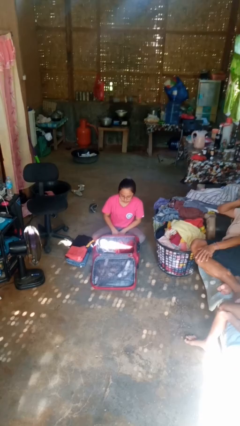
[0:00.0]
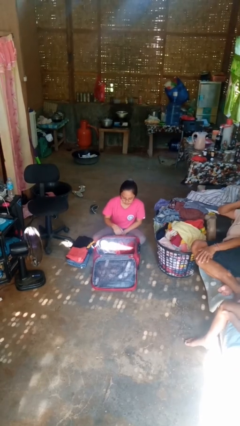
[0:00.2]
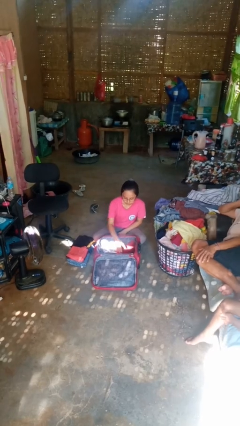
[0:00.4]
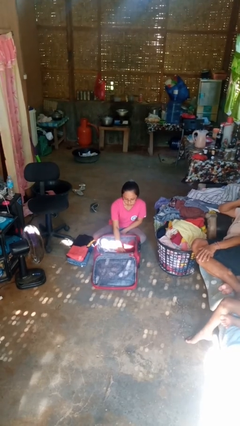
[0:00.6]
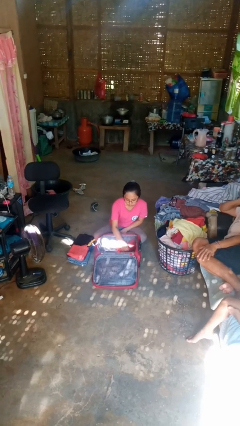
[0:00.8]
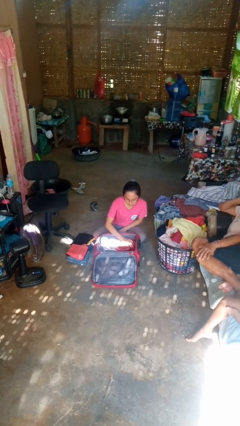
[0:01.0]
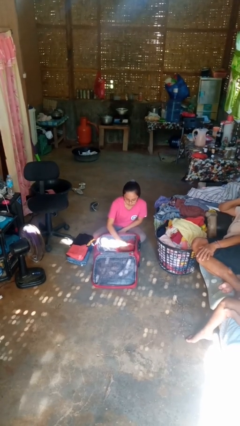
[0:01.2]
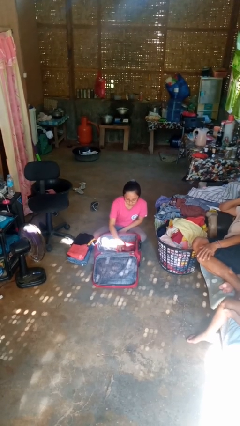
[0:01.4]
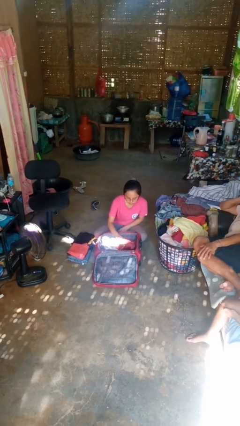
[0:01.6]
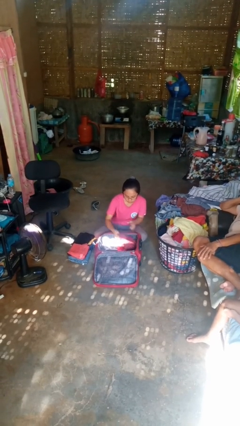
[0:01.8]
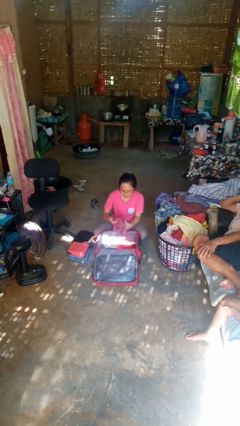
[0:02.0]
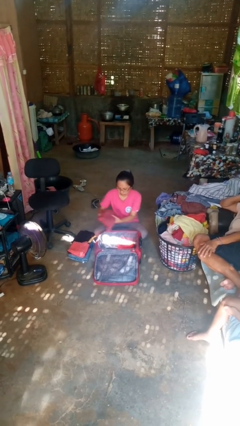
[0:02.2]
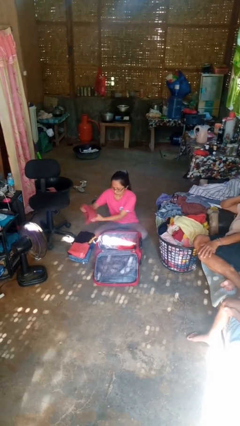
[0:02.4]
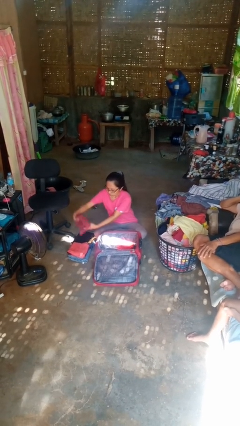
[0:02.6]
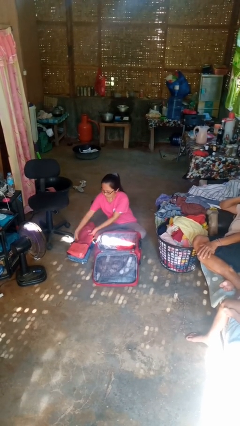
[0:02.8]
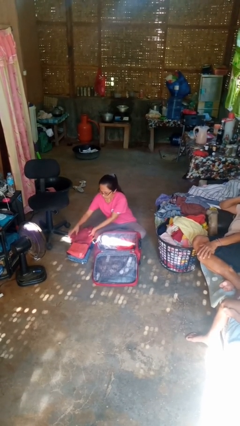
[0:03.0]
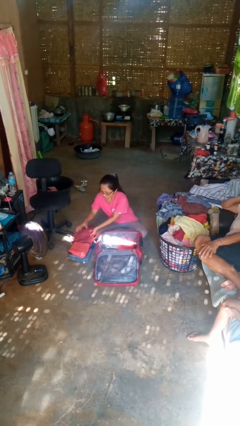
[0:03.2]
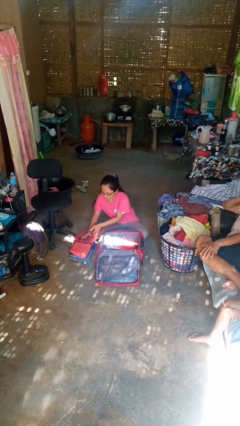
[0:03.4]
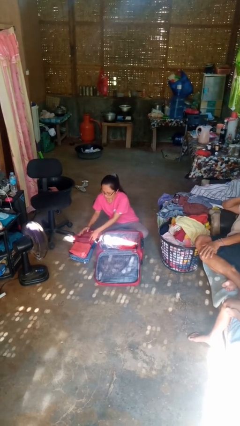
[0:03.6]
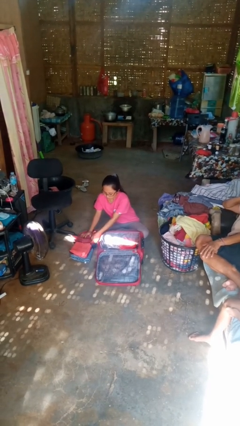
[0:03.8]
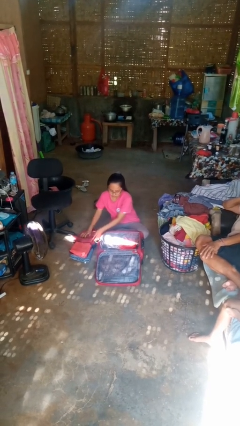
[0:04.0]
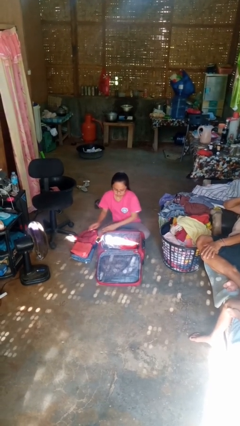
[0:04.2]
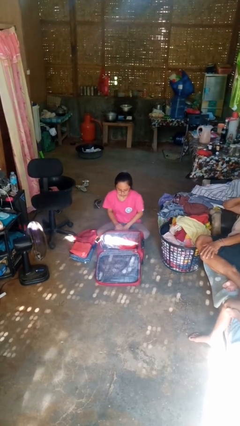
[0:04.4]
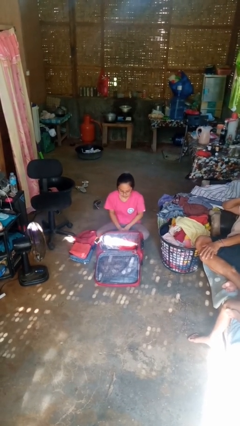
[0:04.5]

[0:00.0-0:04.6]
person unloads clothes from suitcase

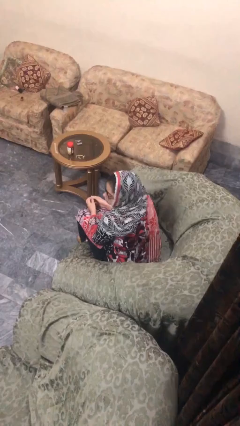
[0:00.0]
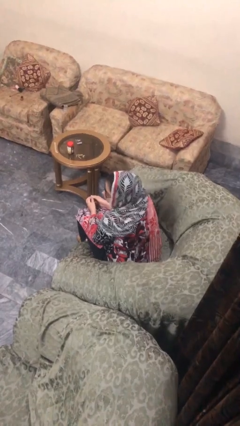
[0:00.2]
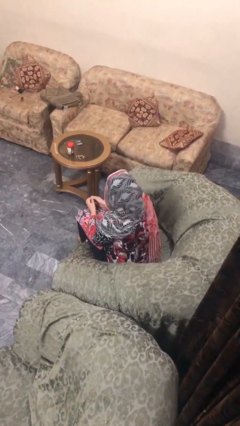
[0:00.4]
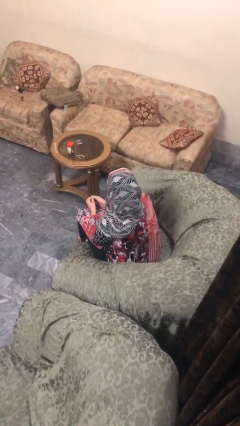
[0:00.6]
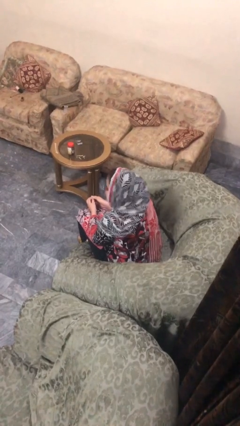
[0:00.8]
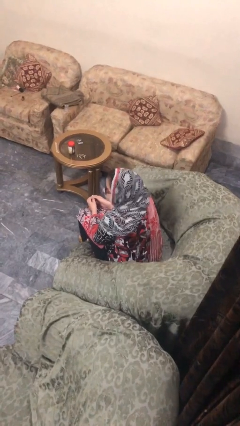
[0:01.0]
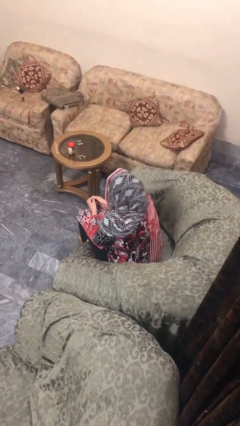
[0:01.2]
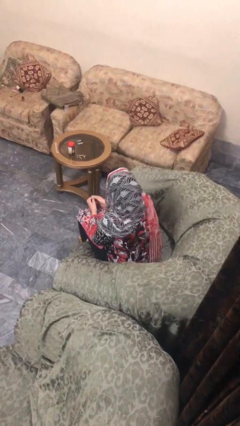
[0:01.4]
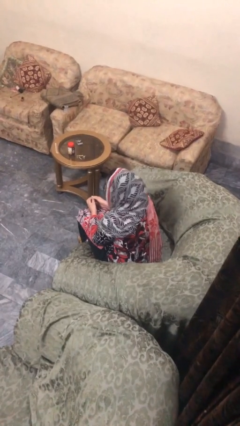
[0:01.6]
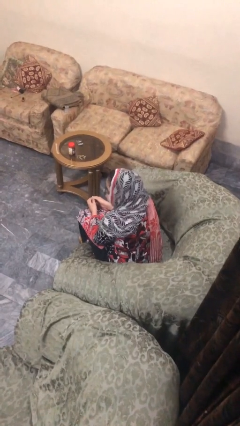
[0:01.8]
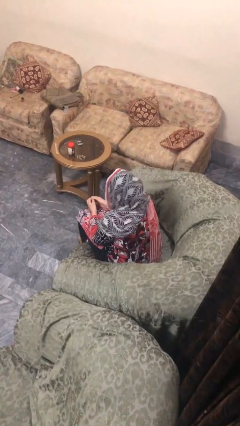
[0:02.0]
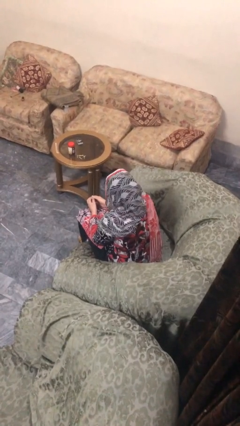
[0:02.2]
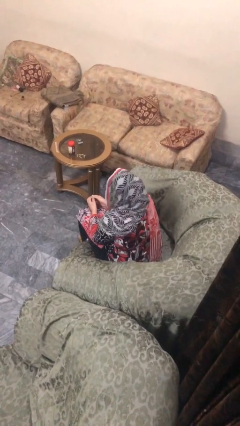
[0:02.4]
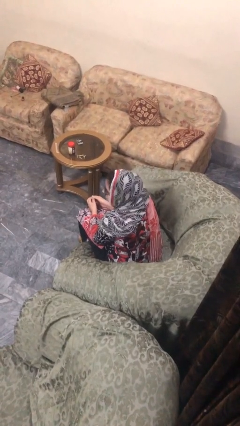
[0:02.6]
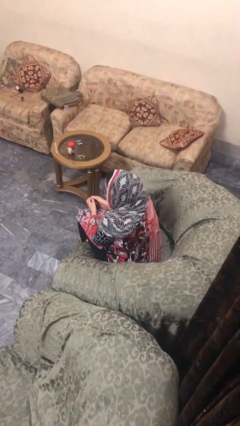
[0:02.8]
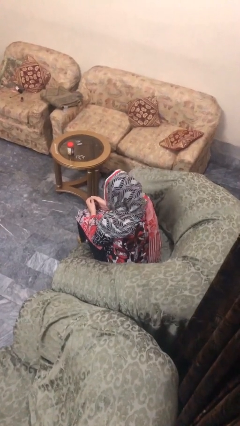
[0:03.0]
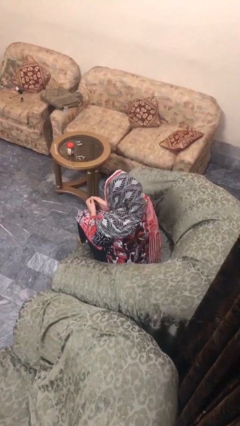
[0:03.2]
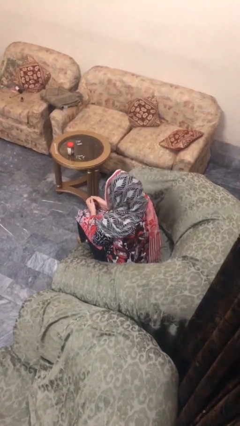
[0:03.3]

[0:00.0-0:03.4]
person shakes head

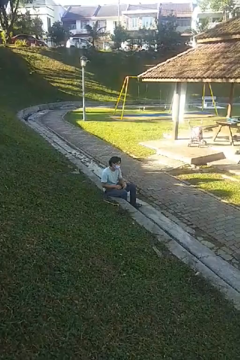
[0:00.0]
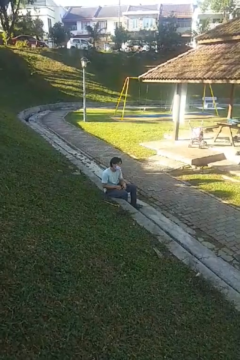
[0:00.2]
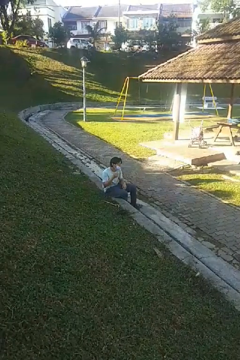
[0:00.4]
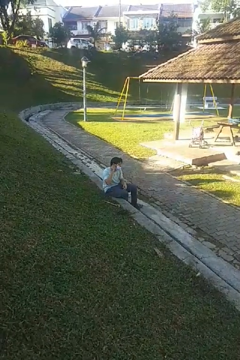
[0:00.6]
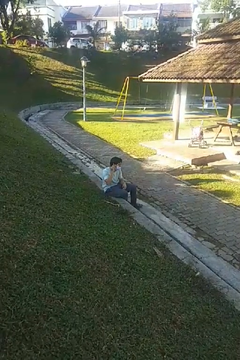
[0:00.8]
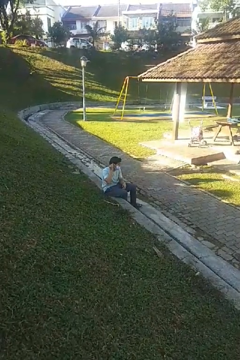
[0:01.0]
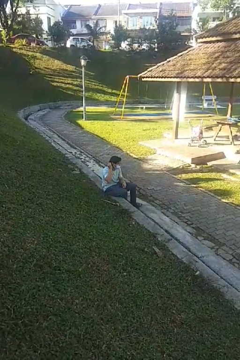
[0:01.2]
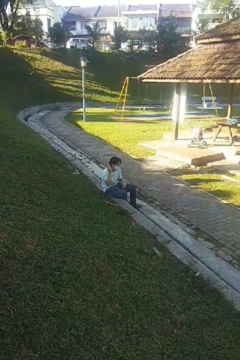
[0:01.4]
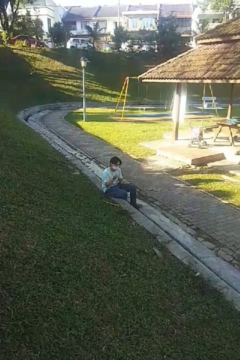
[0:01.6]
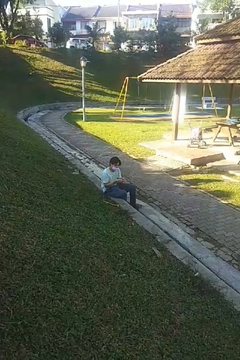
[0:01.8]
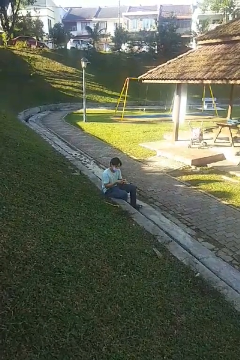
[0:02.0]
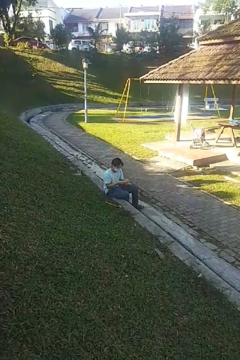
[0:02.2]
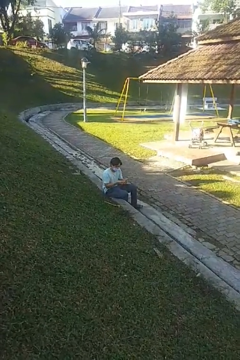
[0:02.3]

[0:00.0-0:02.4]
person takes off earrings

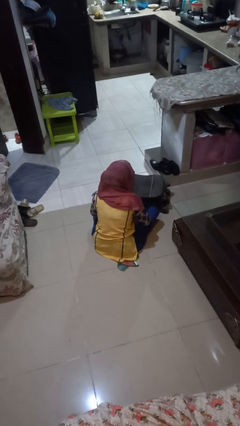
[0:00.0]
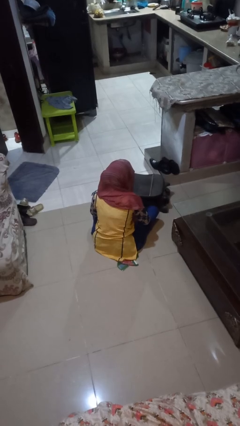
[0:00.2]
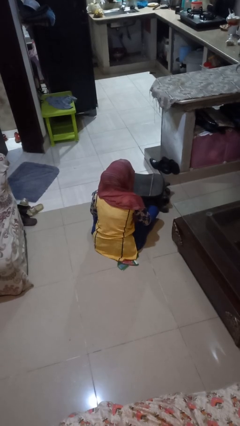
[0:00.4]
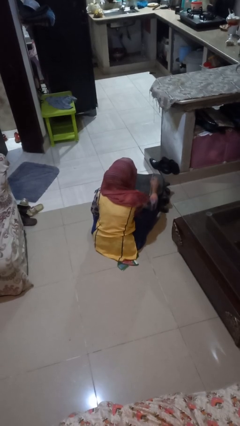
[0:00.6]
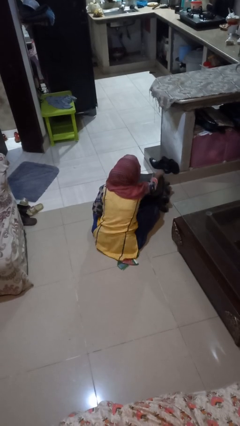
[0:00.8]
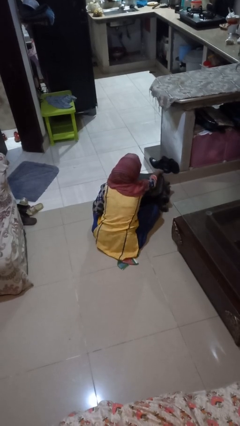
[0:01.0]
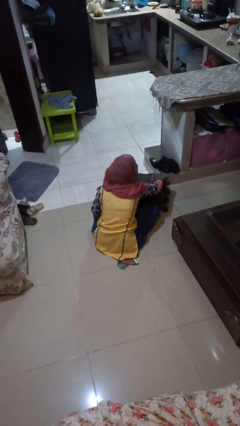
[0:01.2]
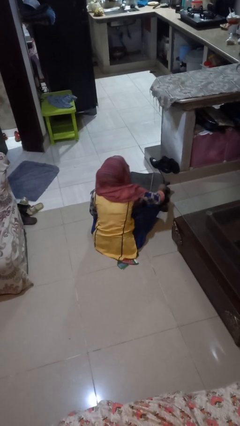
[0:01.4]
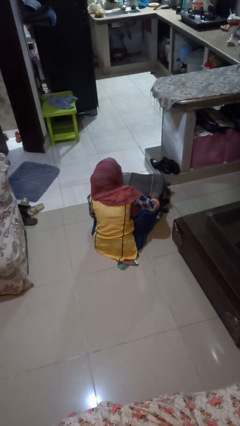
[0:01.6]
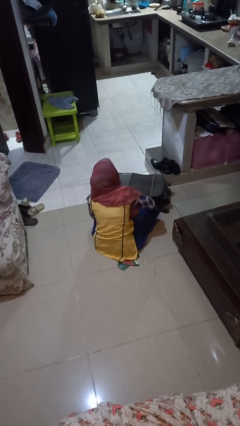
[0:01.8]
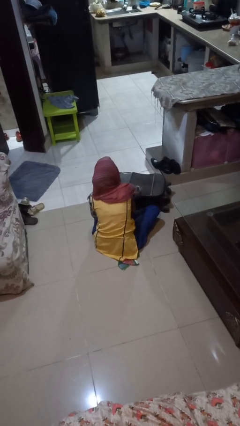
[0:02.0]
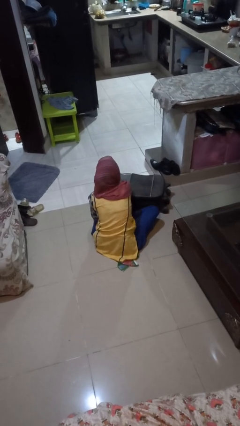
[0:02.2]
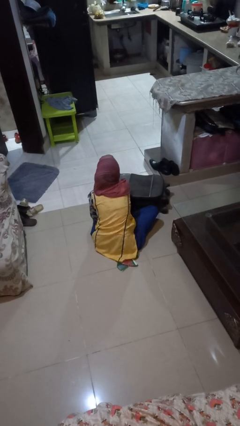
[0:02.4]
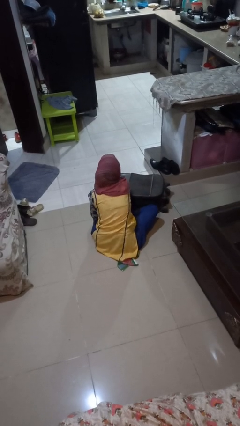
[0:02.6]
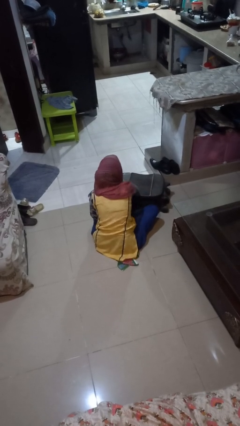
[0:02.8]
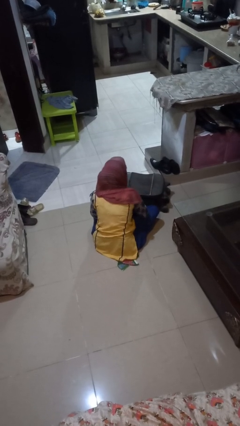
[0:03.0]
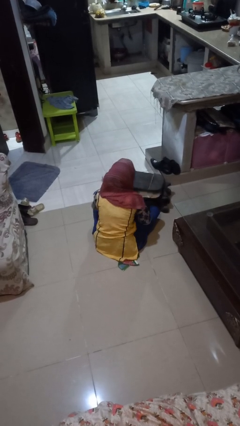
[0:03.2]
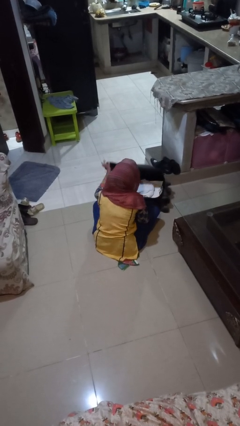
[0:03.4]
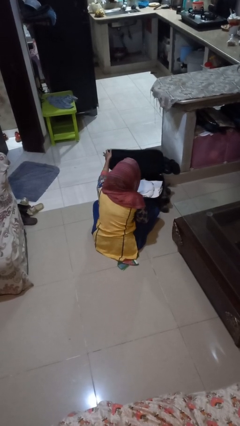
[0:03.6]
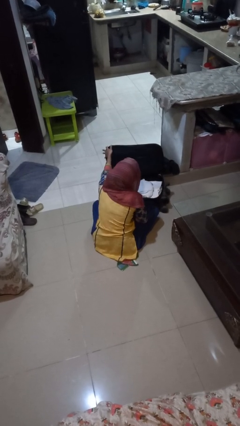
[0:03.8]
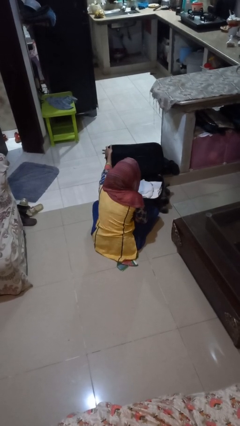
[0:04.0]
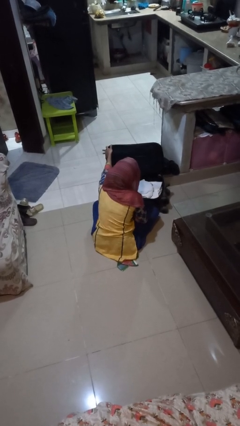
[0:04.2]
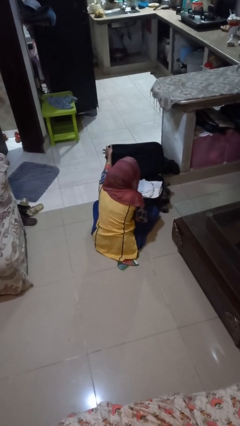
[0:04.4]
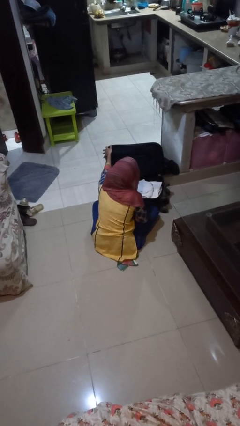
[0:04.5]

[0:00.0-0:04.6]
person opens suitcase

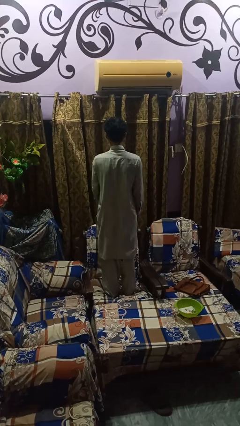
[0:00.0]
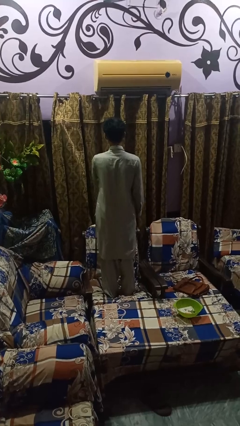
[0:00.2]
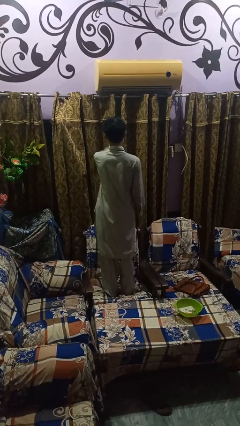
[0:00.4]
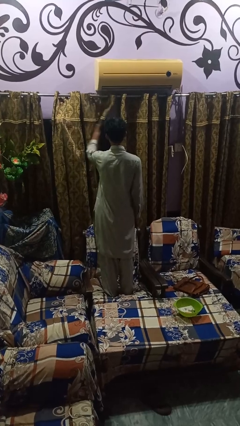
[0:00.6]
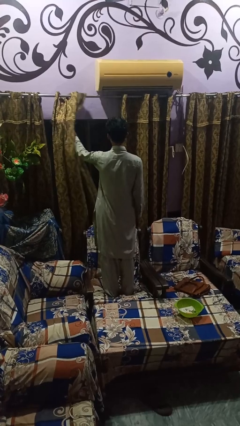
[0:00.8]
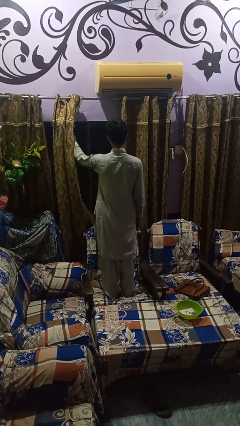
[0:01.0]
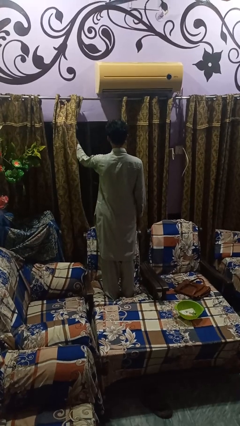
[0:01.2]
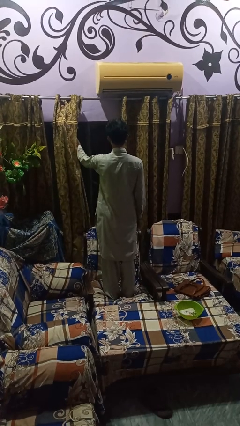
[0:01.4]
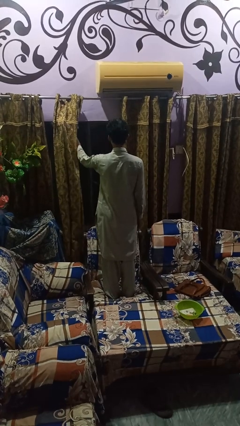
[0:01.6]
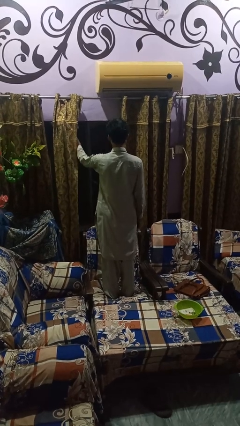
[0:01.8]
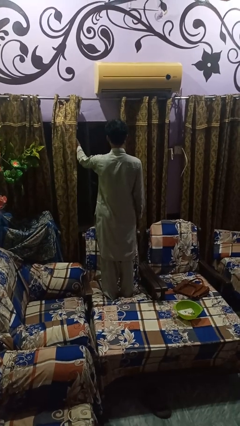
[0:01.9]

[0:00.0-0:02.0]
person opens curtains

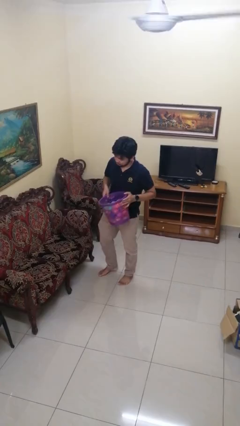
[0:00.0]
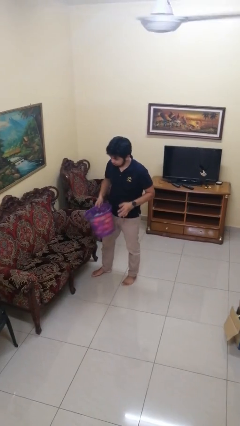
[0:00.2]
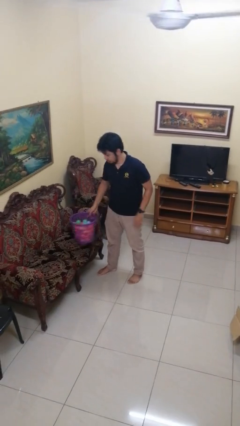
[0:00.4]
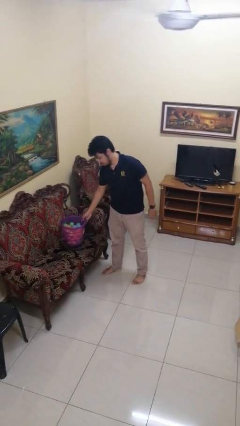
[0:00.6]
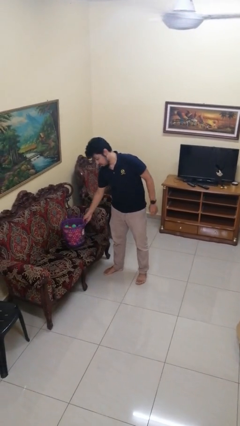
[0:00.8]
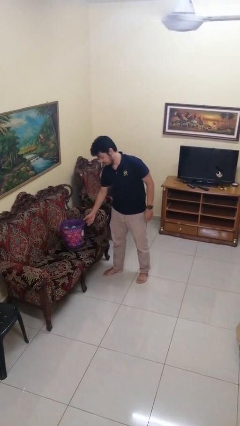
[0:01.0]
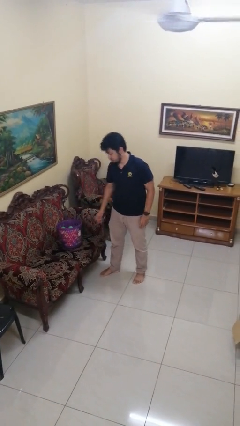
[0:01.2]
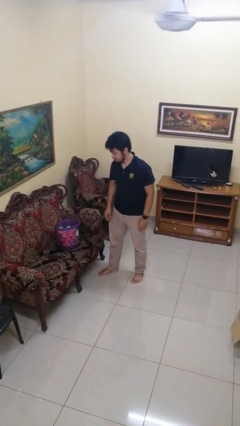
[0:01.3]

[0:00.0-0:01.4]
person puts down object on couch
